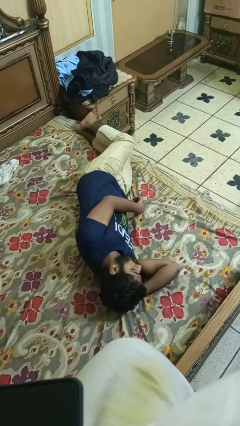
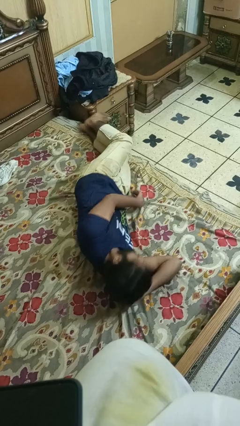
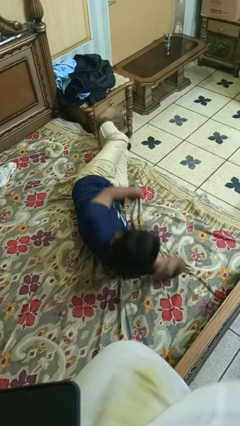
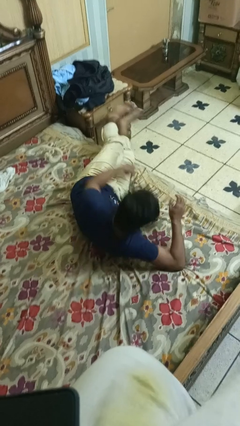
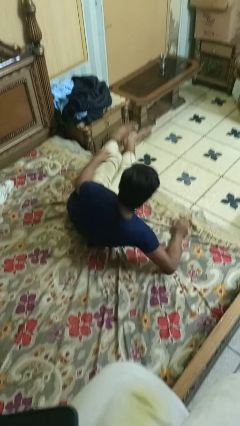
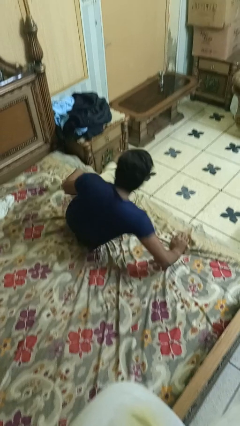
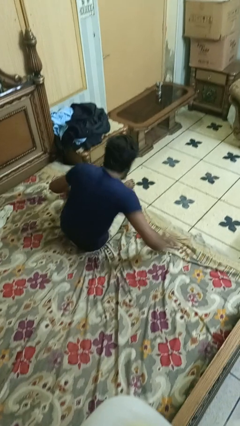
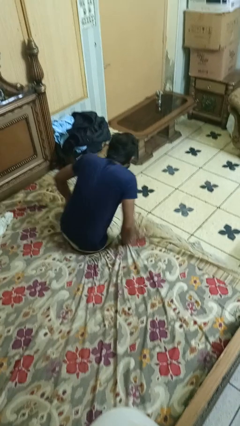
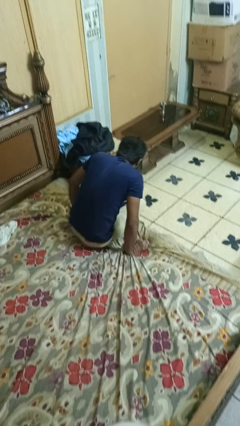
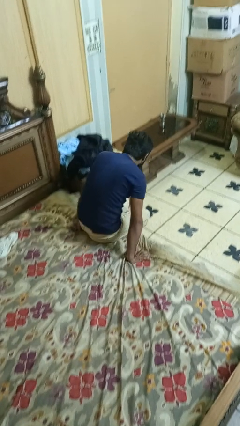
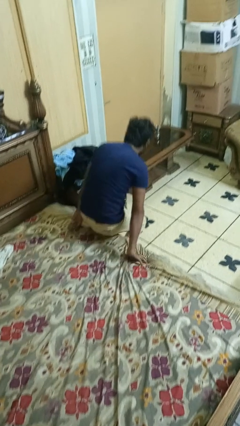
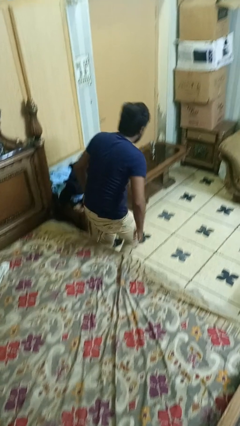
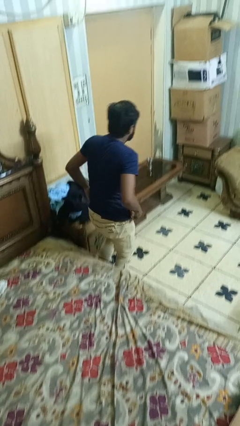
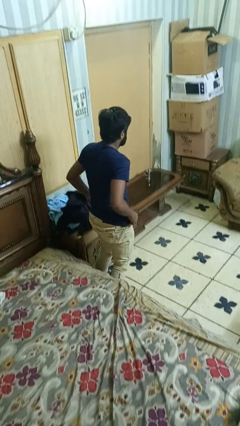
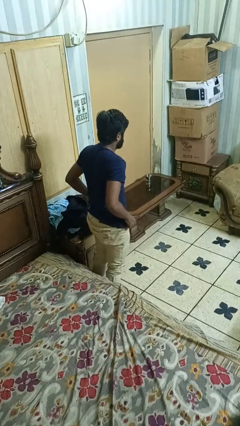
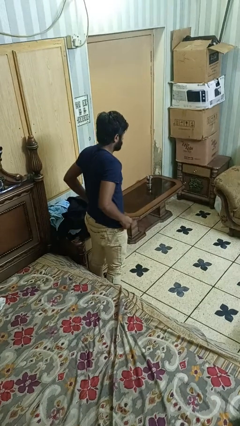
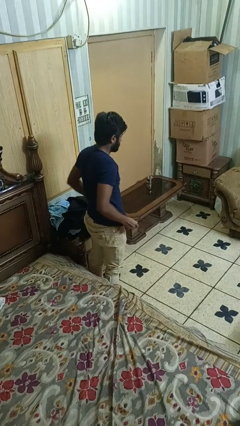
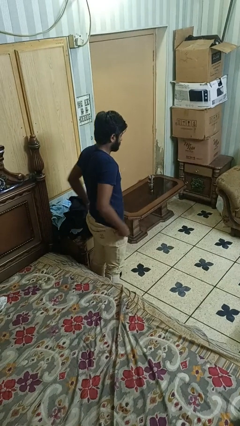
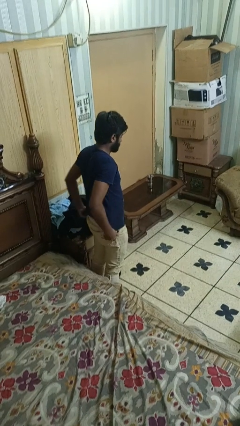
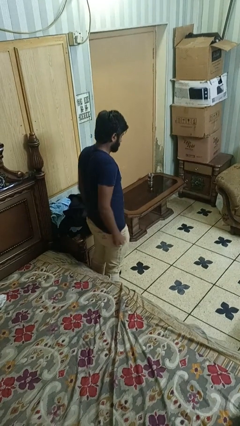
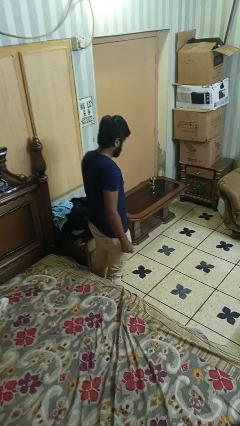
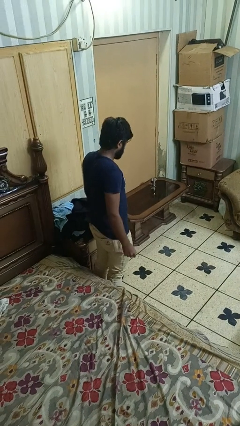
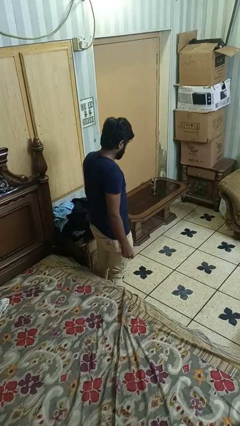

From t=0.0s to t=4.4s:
person stands up

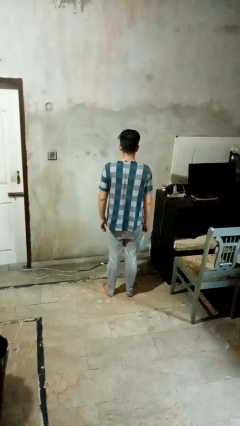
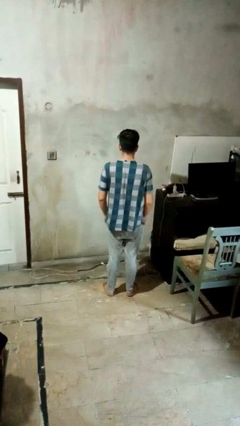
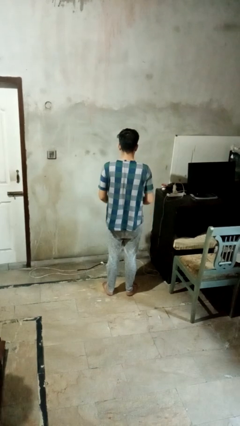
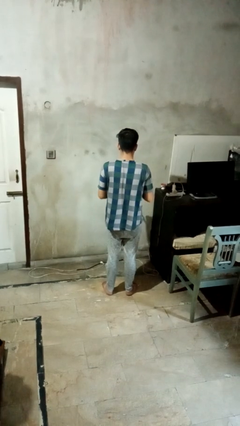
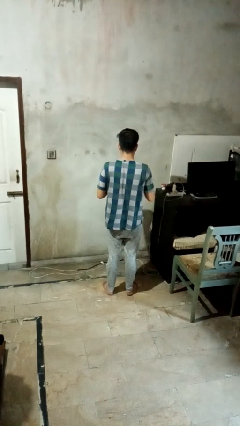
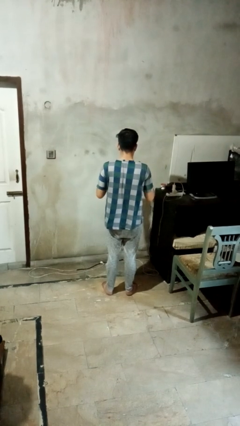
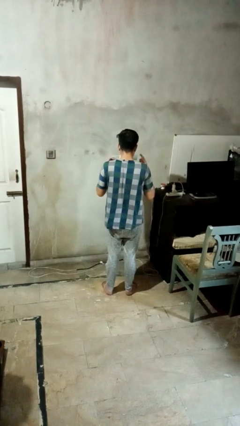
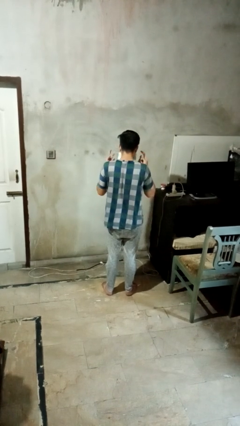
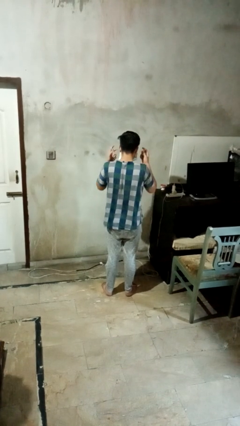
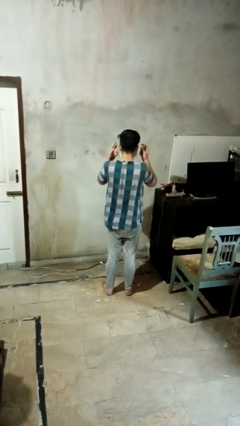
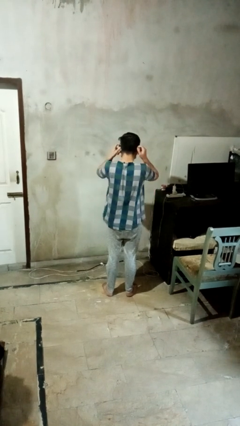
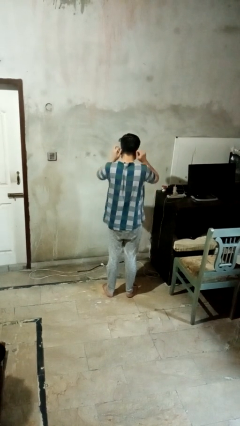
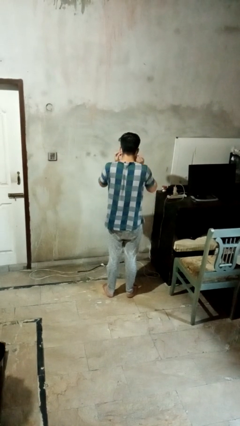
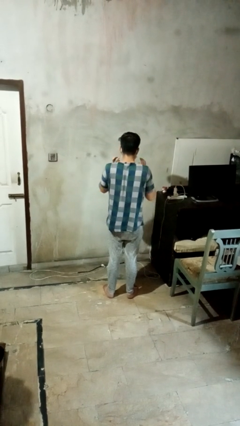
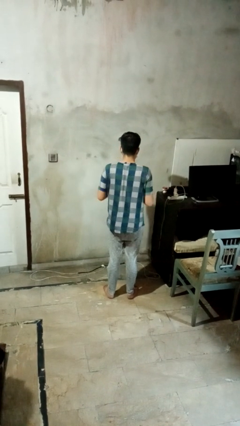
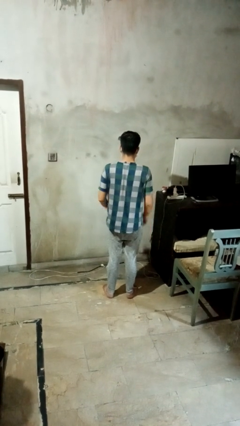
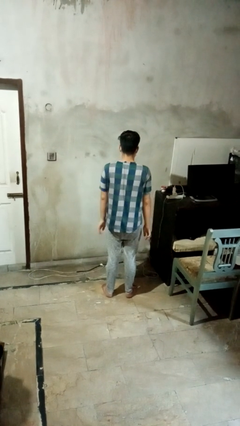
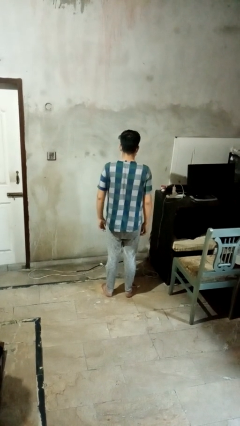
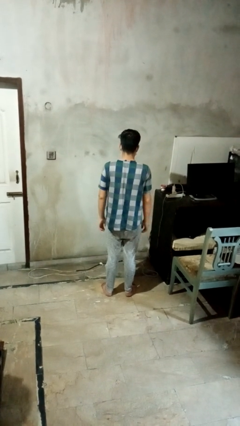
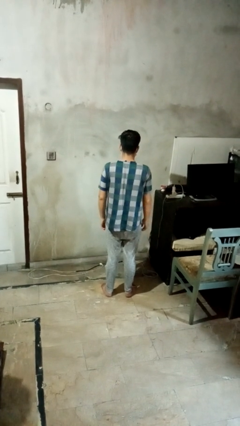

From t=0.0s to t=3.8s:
person puts on facemask

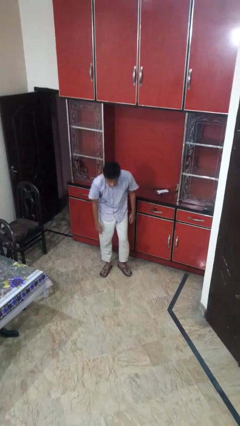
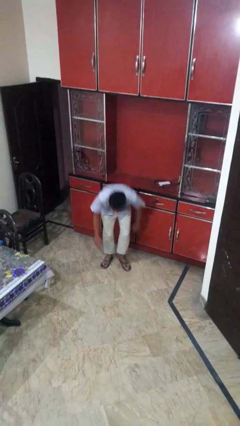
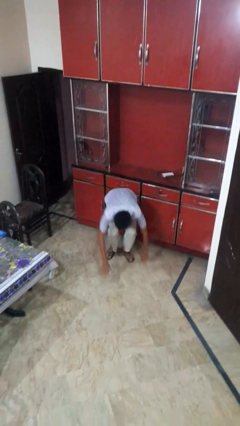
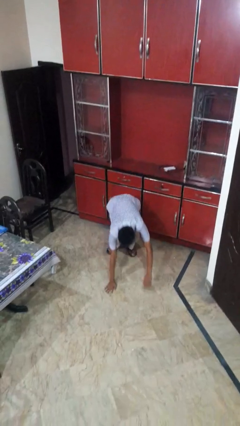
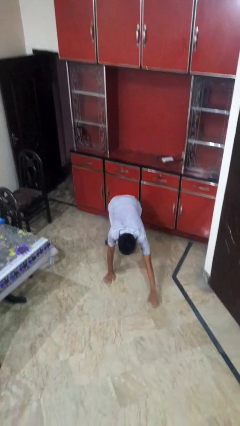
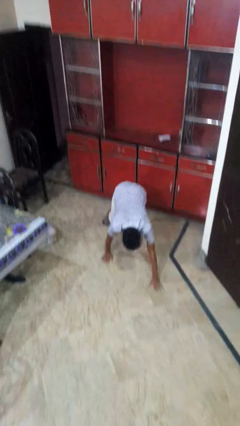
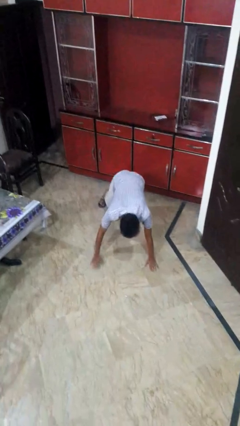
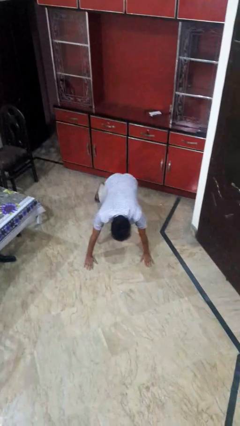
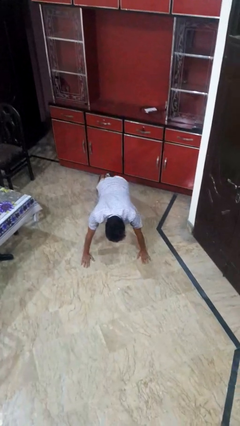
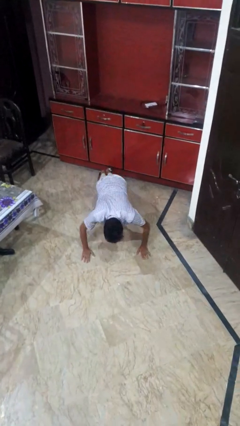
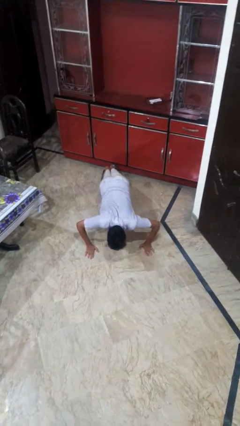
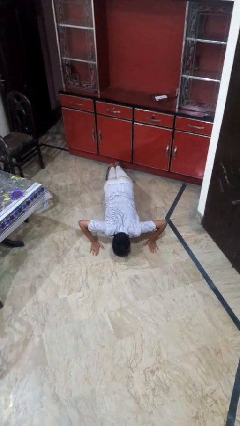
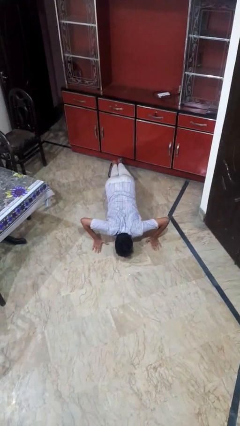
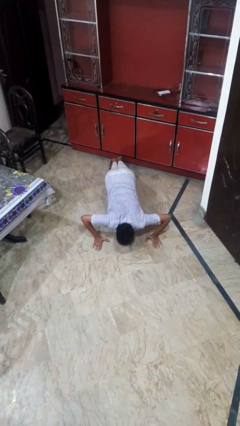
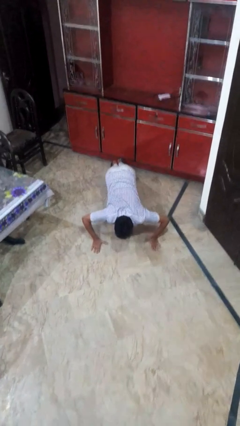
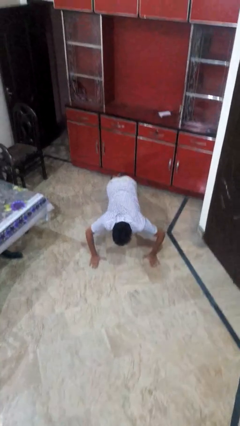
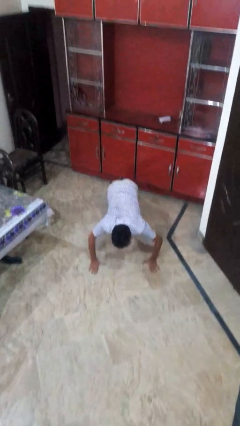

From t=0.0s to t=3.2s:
person exercises with pushup

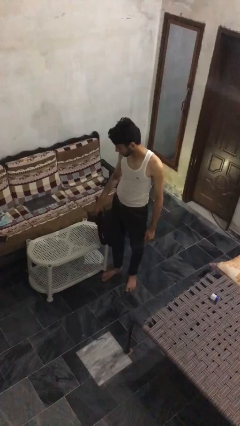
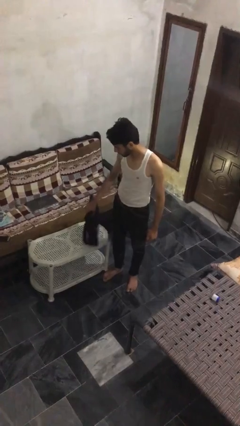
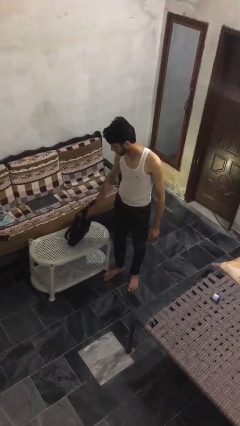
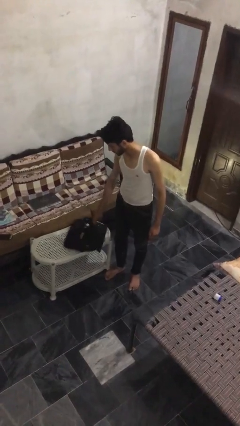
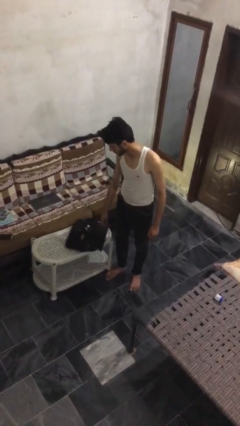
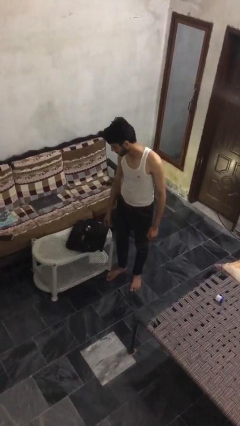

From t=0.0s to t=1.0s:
person puts down object on table

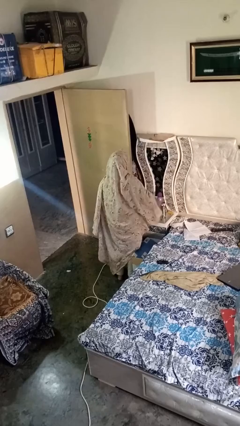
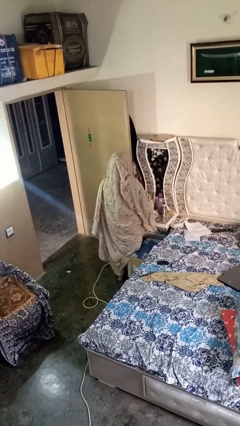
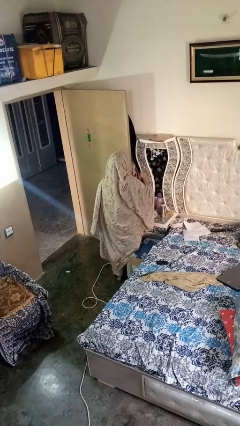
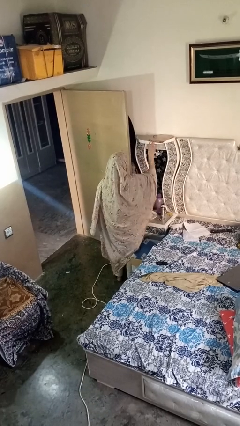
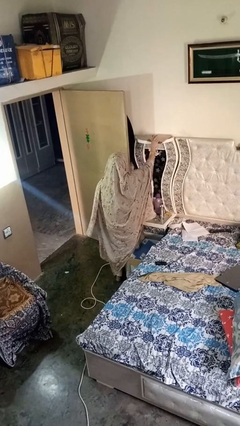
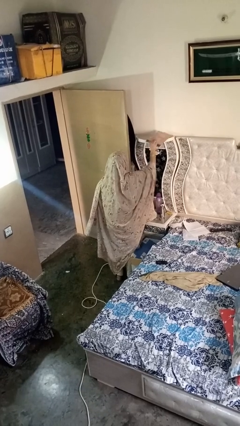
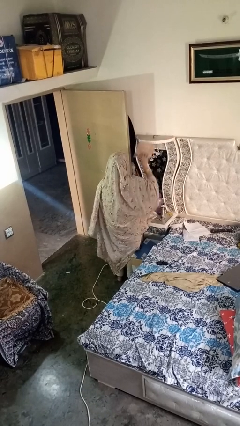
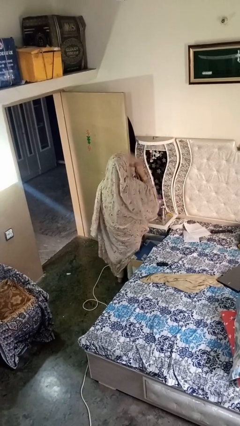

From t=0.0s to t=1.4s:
person picks up object from shelf

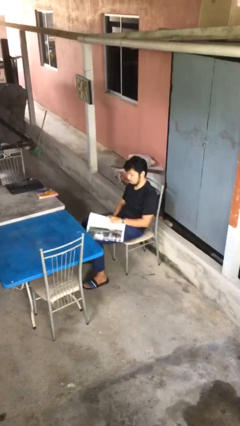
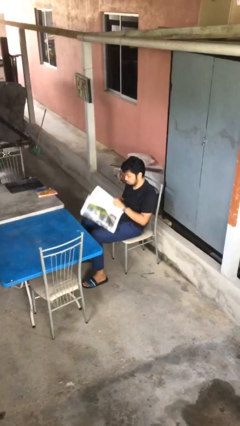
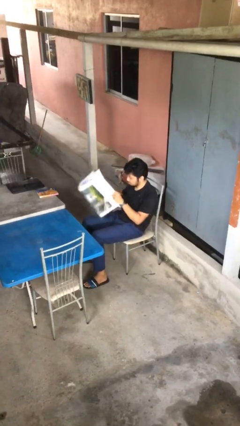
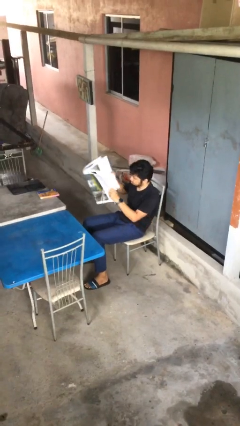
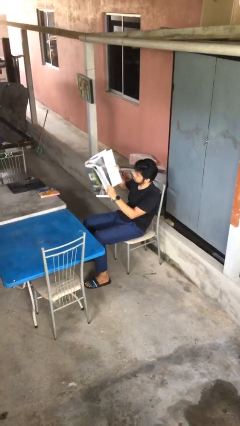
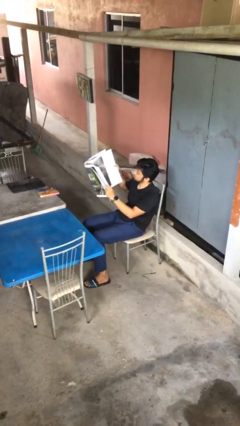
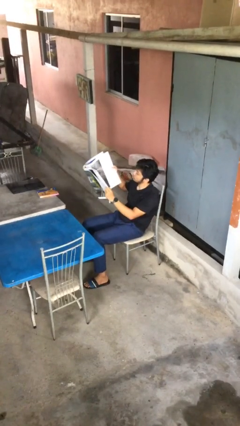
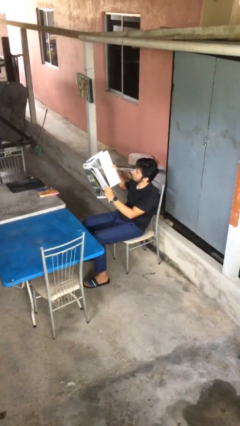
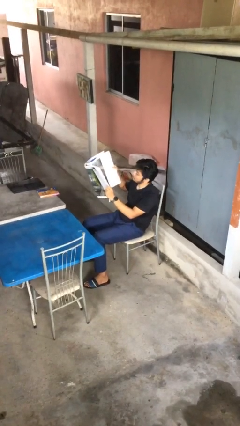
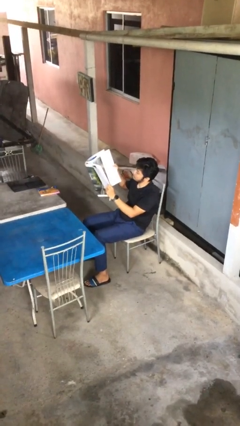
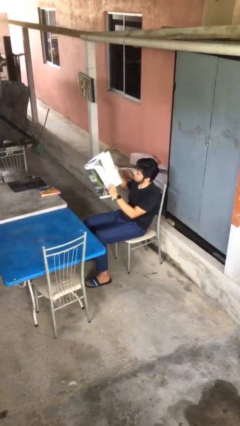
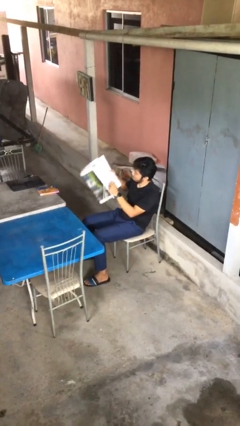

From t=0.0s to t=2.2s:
person reads newspaper

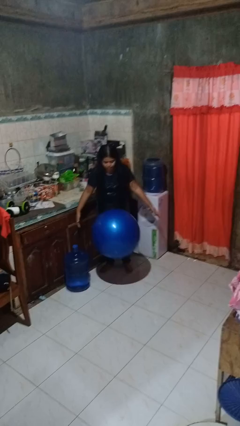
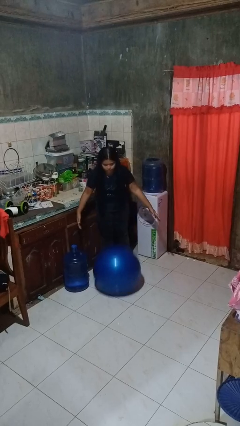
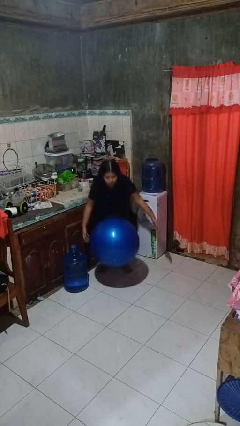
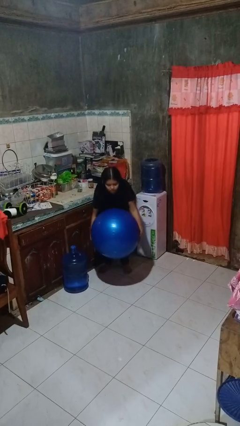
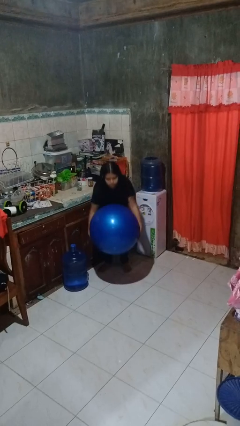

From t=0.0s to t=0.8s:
person bounces ball on floor
